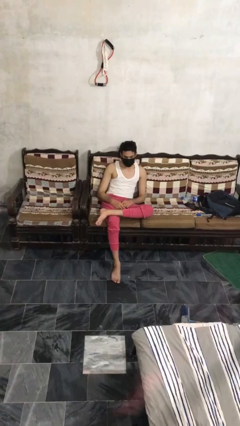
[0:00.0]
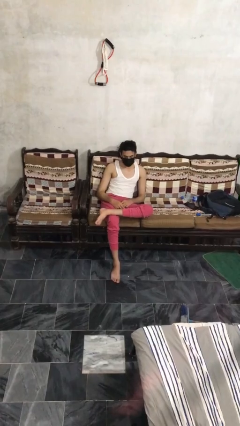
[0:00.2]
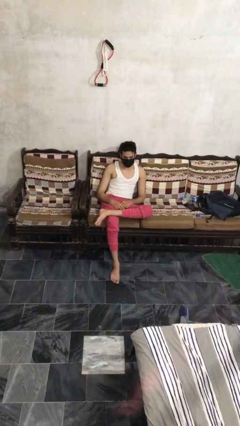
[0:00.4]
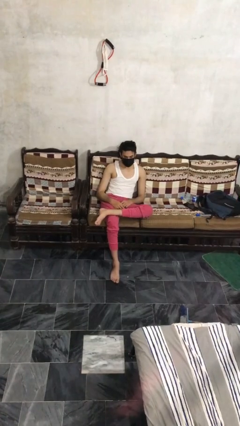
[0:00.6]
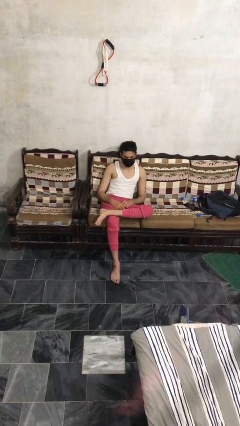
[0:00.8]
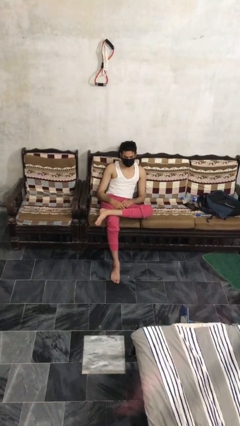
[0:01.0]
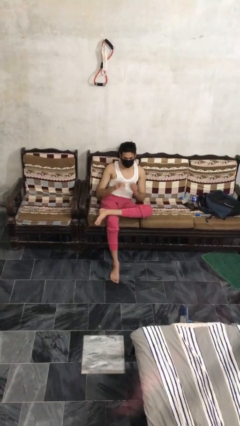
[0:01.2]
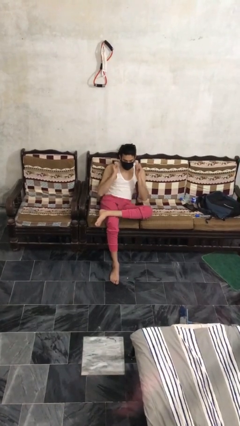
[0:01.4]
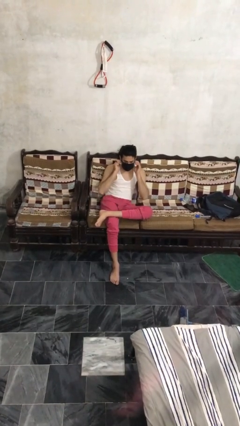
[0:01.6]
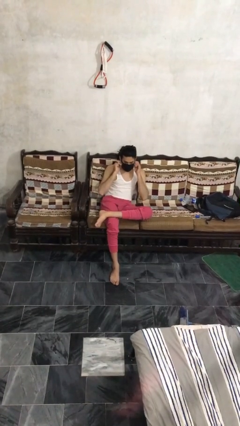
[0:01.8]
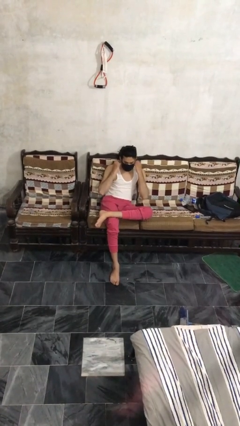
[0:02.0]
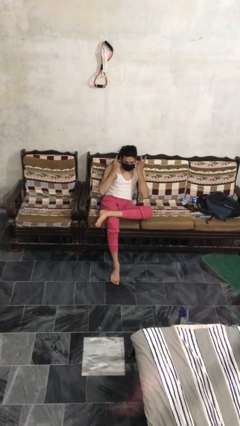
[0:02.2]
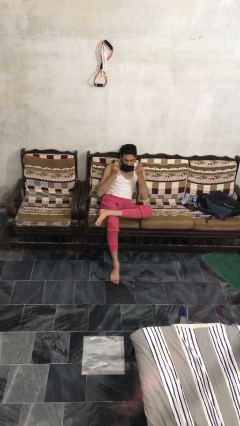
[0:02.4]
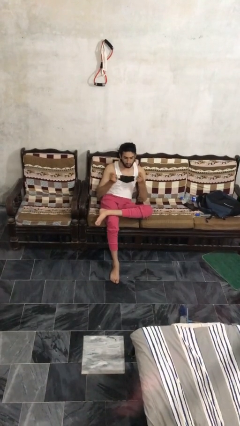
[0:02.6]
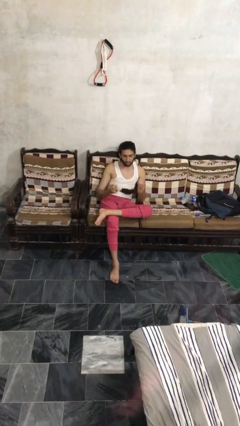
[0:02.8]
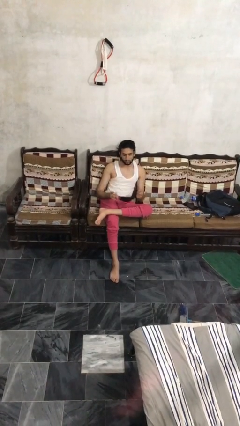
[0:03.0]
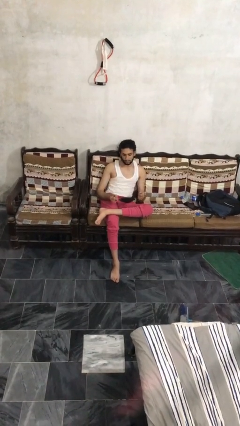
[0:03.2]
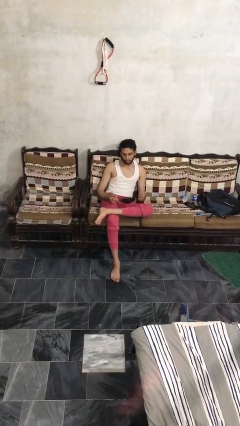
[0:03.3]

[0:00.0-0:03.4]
person takes off facemask

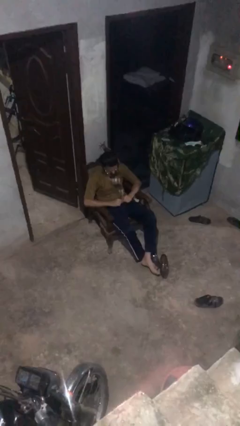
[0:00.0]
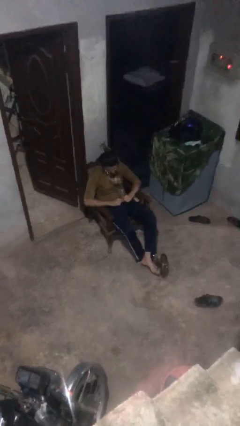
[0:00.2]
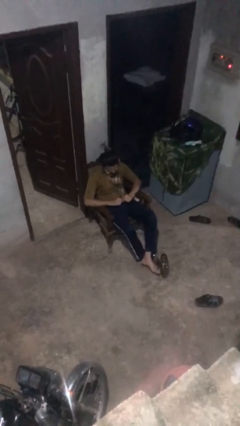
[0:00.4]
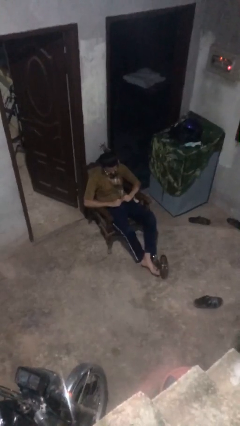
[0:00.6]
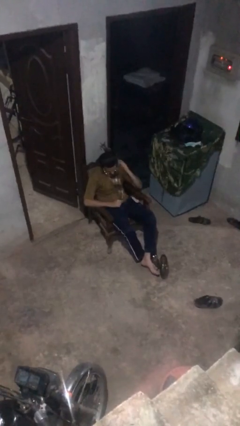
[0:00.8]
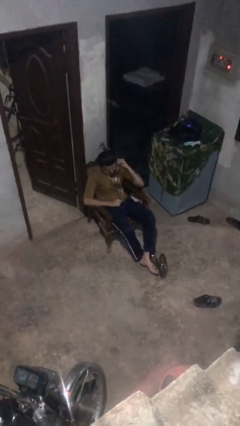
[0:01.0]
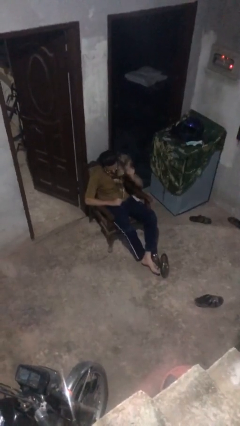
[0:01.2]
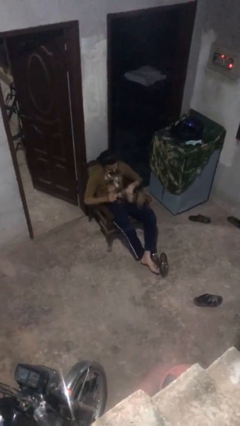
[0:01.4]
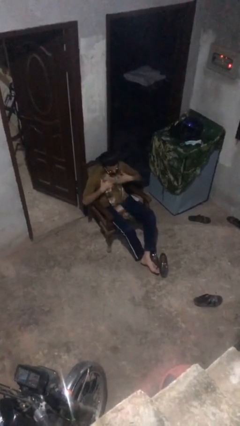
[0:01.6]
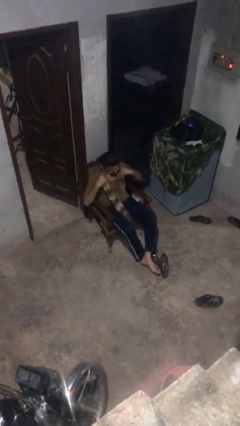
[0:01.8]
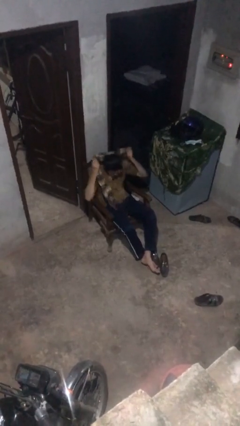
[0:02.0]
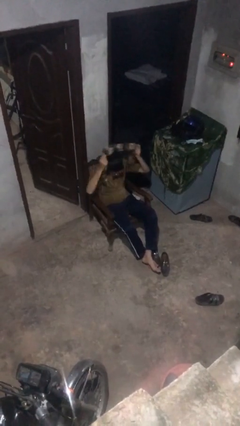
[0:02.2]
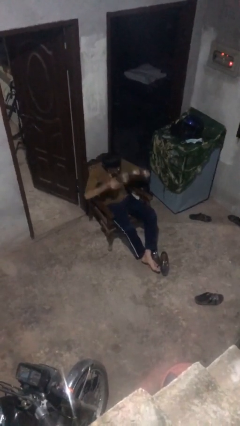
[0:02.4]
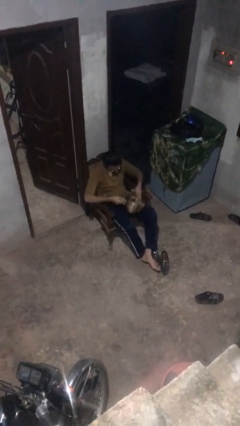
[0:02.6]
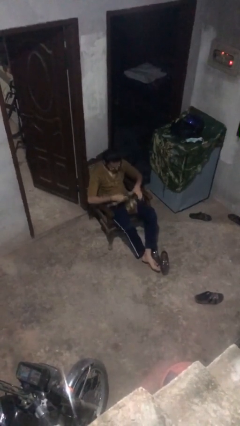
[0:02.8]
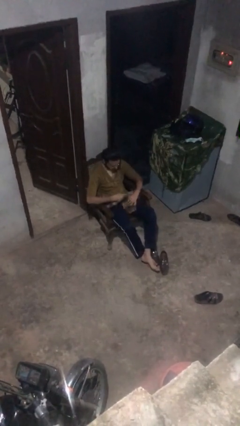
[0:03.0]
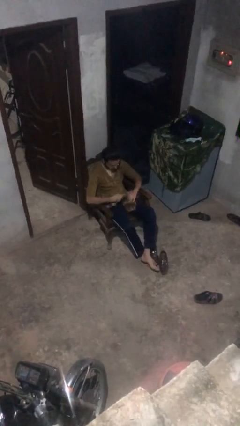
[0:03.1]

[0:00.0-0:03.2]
person takes off scarf

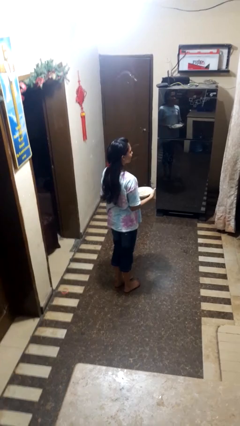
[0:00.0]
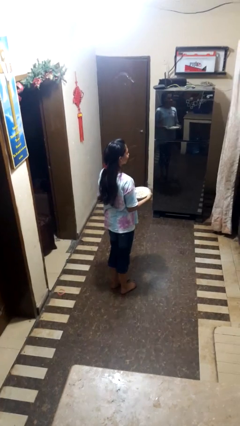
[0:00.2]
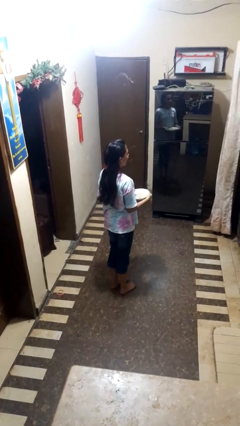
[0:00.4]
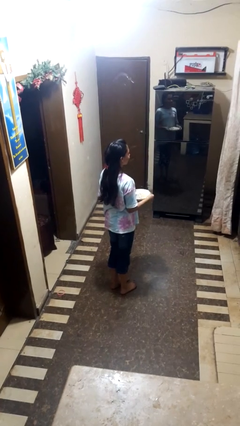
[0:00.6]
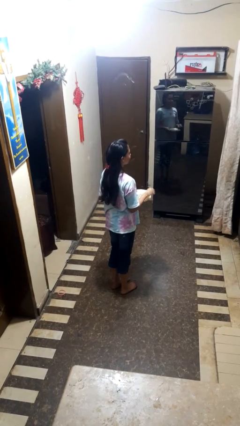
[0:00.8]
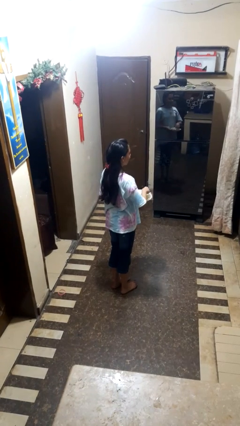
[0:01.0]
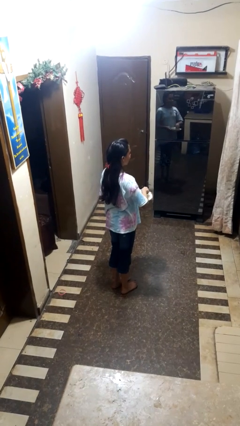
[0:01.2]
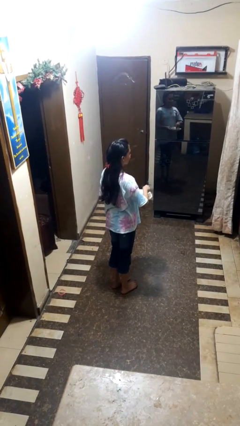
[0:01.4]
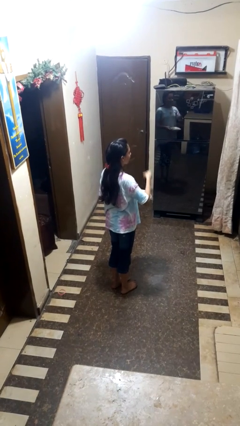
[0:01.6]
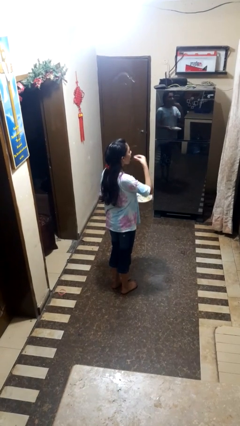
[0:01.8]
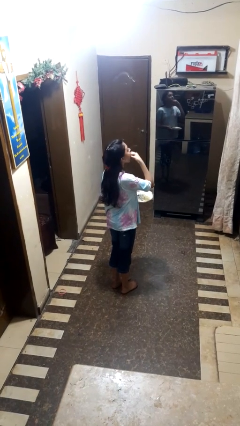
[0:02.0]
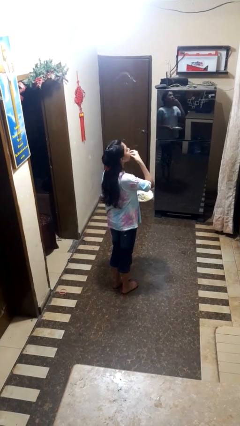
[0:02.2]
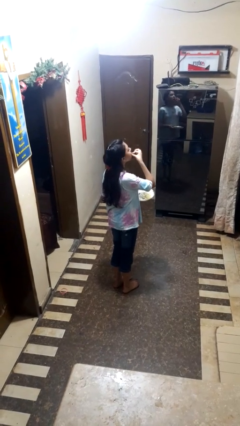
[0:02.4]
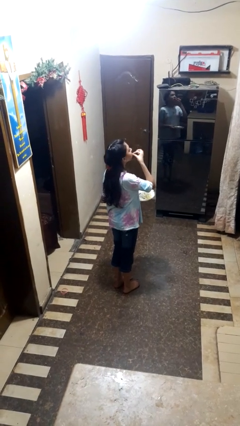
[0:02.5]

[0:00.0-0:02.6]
person eats with hands

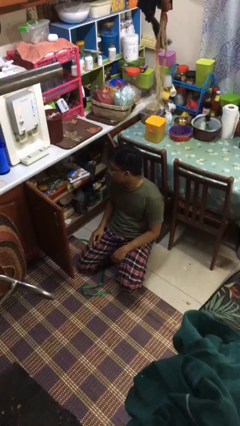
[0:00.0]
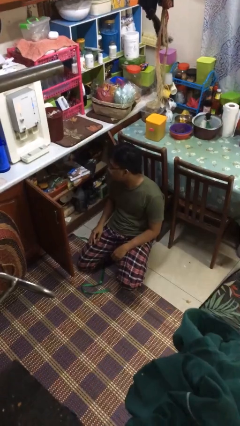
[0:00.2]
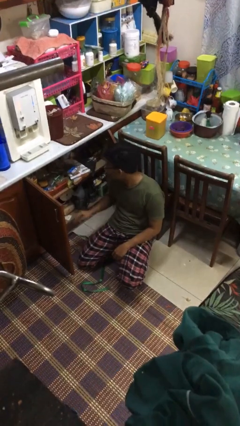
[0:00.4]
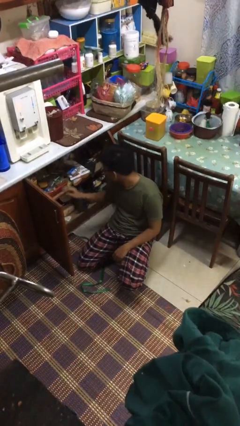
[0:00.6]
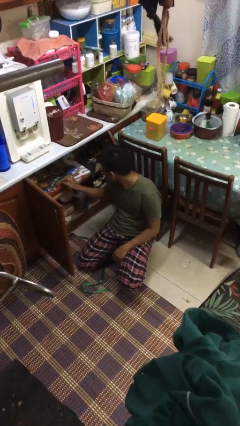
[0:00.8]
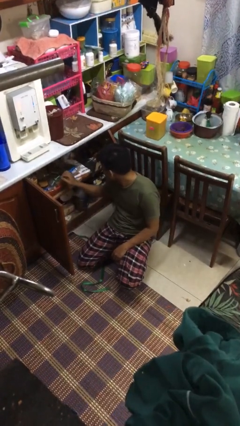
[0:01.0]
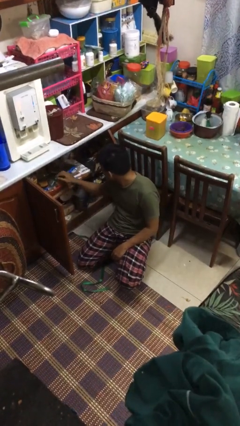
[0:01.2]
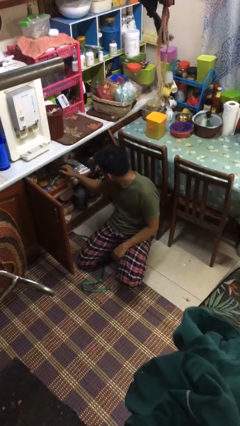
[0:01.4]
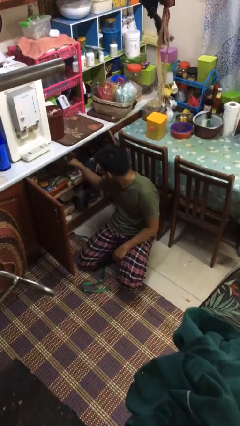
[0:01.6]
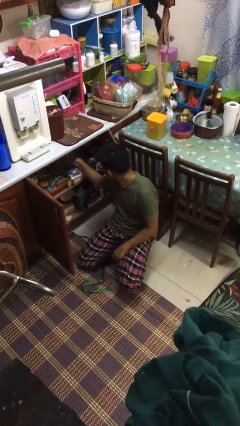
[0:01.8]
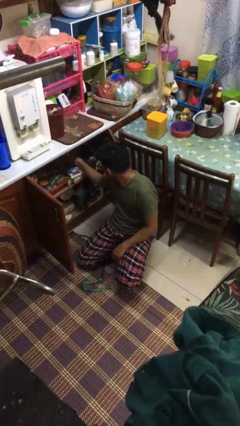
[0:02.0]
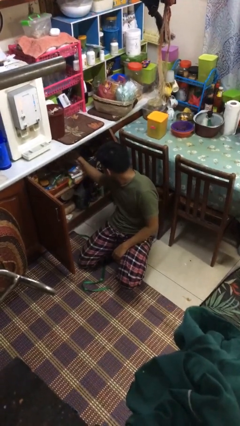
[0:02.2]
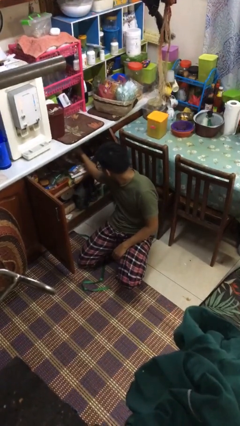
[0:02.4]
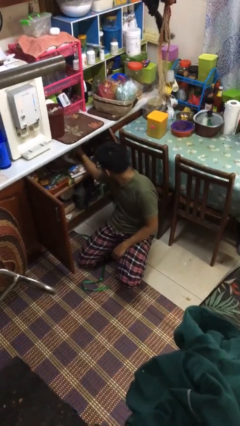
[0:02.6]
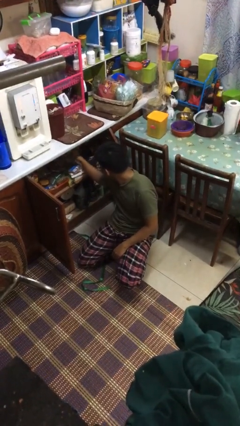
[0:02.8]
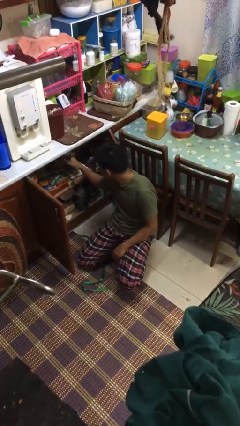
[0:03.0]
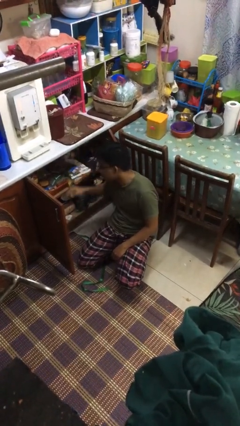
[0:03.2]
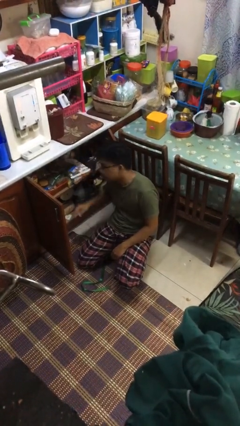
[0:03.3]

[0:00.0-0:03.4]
person searches in kitchen drawer

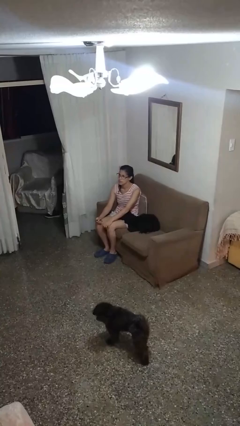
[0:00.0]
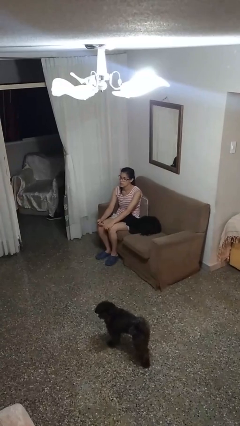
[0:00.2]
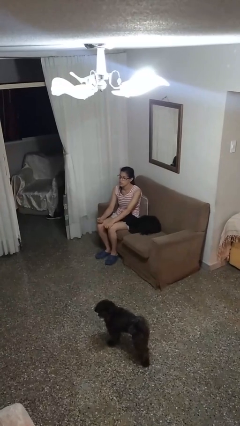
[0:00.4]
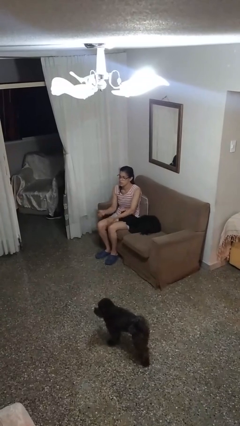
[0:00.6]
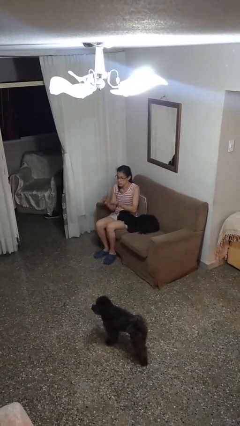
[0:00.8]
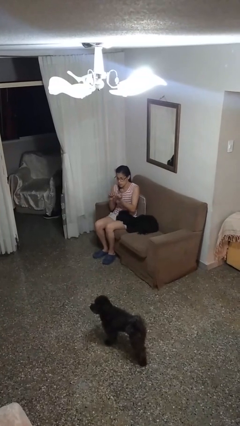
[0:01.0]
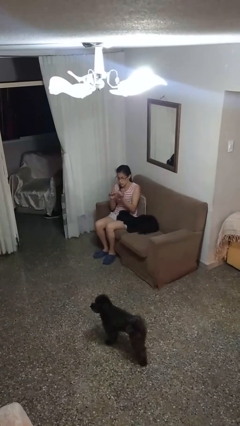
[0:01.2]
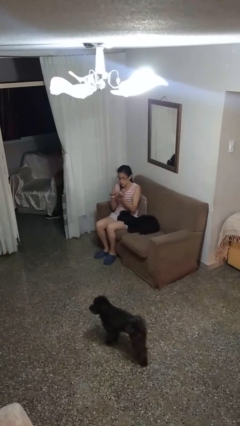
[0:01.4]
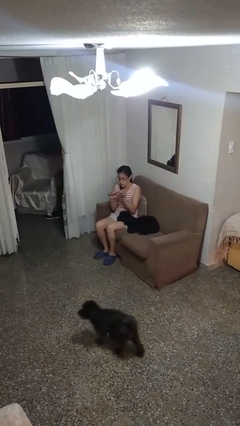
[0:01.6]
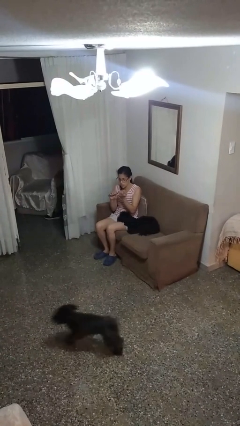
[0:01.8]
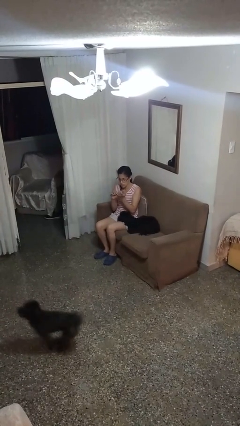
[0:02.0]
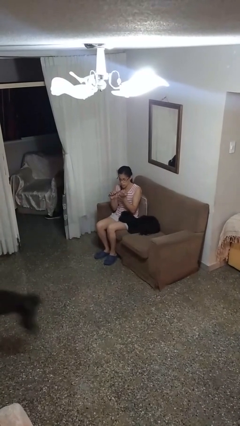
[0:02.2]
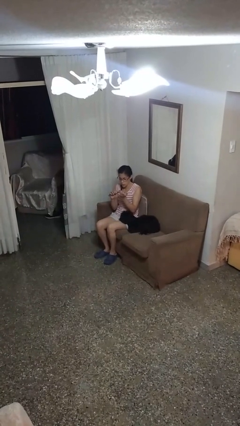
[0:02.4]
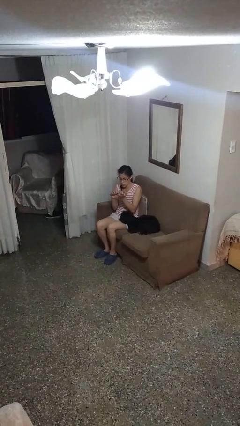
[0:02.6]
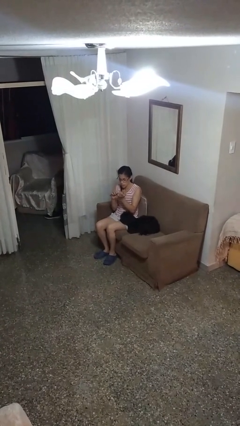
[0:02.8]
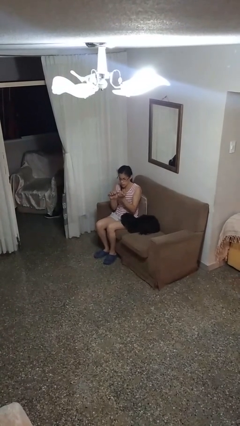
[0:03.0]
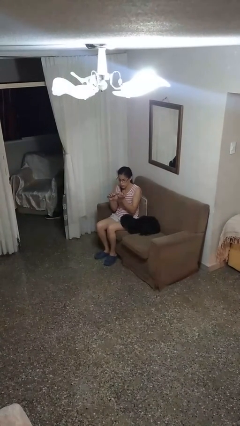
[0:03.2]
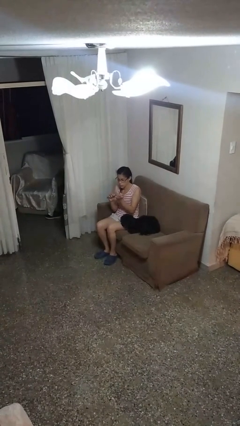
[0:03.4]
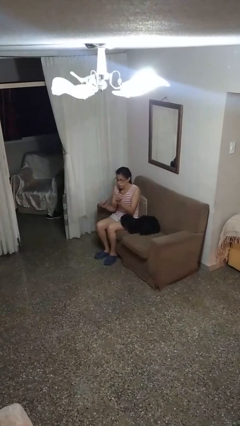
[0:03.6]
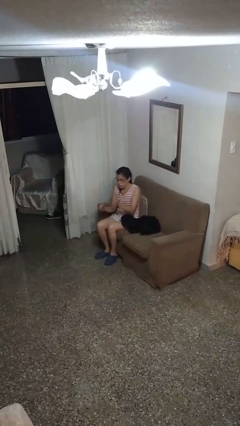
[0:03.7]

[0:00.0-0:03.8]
person files fingernails

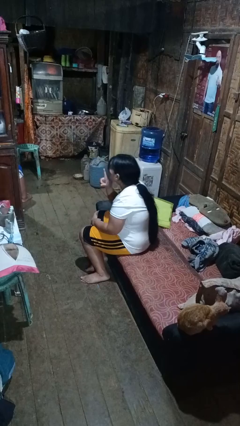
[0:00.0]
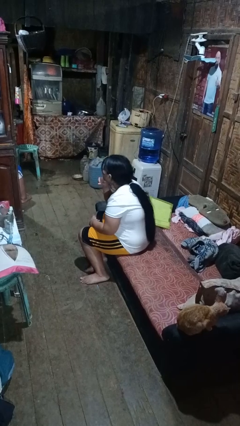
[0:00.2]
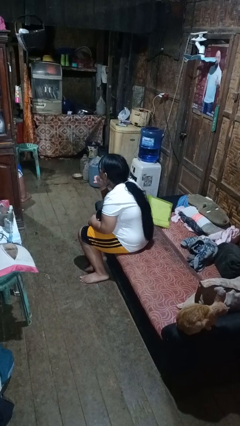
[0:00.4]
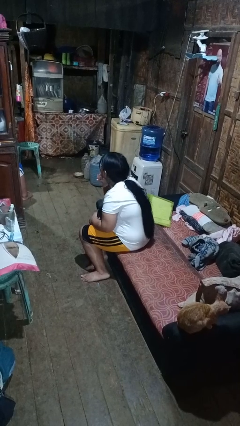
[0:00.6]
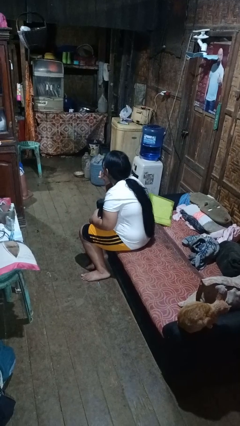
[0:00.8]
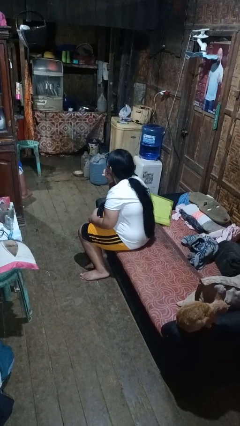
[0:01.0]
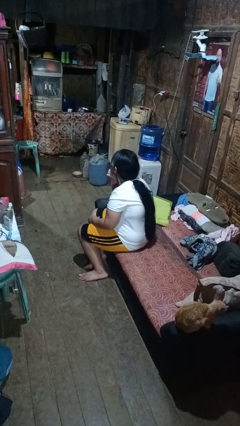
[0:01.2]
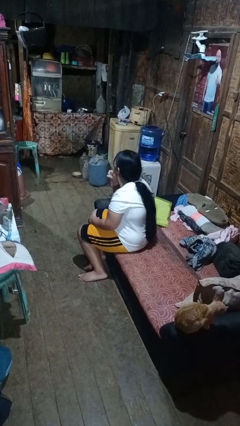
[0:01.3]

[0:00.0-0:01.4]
person gestures be quiet
